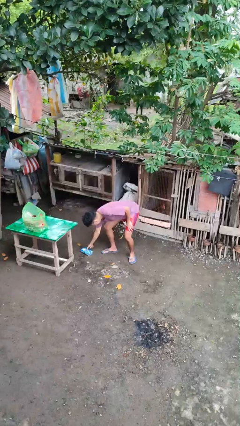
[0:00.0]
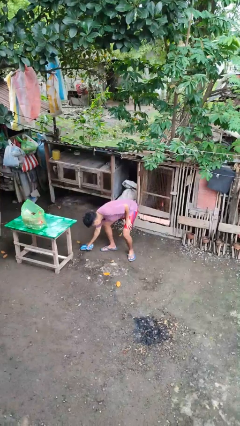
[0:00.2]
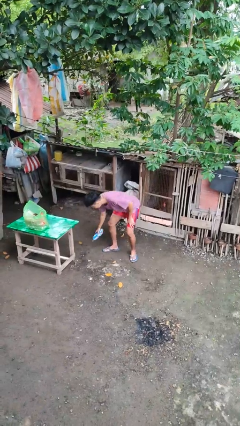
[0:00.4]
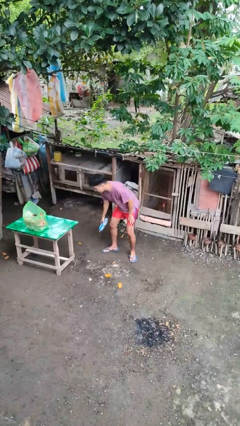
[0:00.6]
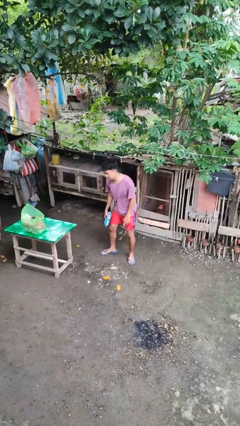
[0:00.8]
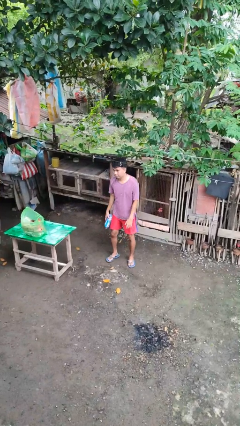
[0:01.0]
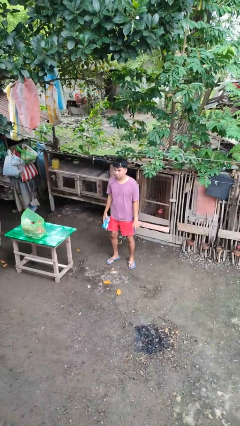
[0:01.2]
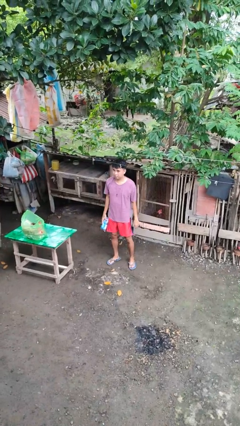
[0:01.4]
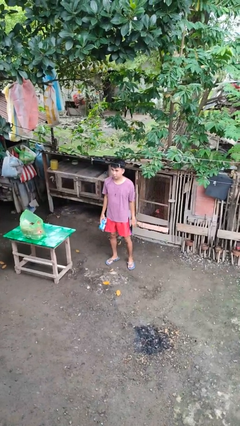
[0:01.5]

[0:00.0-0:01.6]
person picks up object from floor

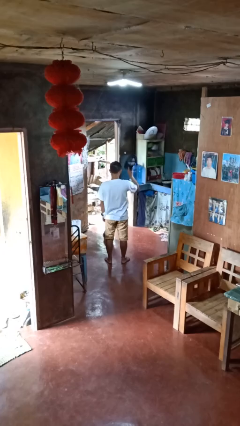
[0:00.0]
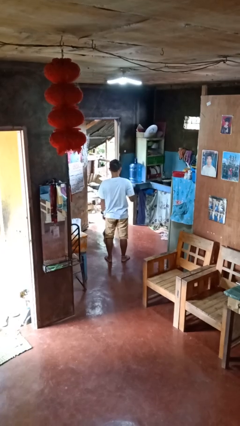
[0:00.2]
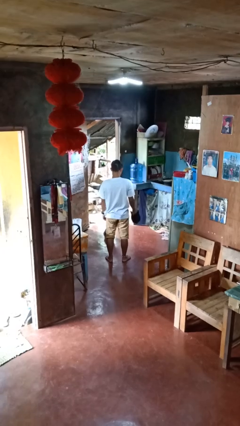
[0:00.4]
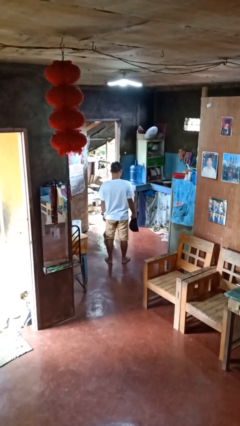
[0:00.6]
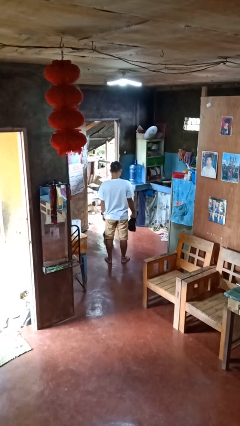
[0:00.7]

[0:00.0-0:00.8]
person takes off hat

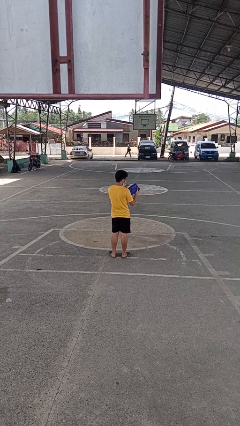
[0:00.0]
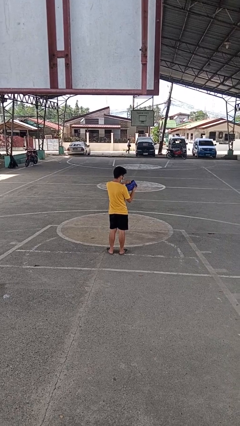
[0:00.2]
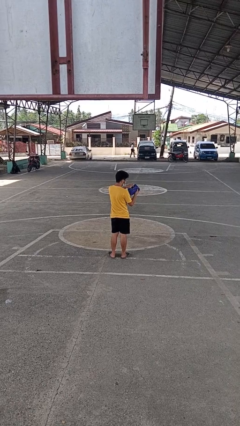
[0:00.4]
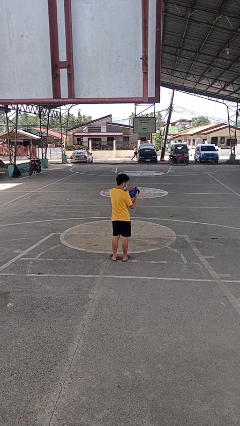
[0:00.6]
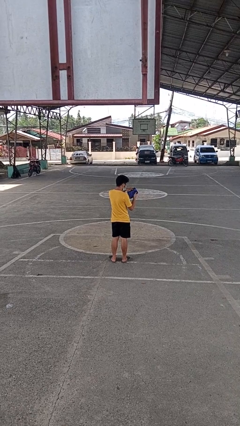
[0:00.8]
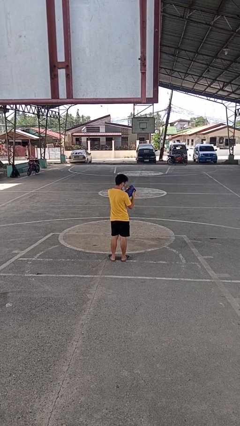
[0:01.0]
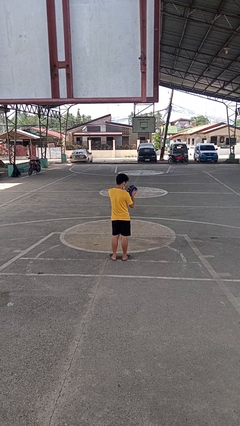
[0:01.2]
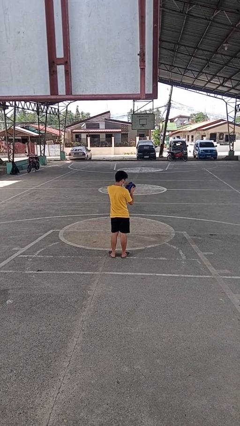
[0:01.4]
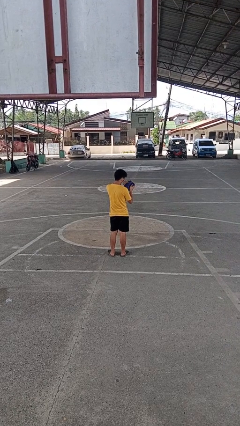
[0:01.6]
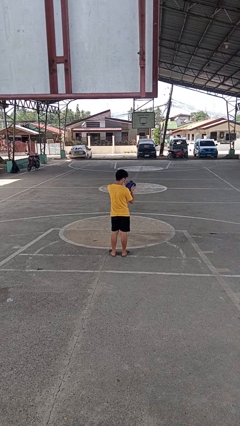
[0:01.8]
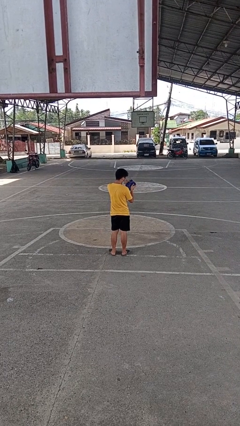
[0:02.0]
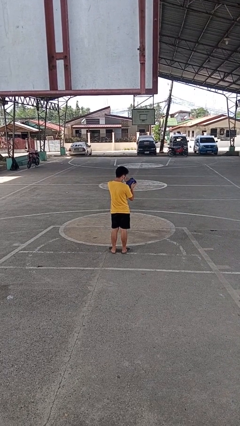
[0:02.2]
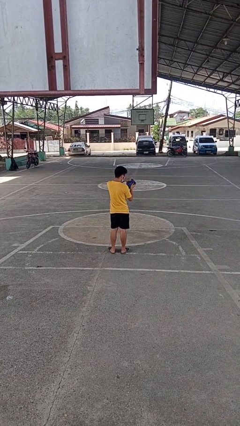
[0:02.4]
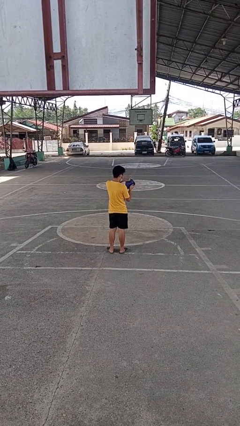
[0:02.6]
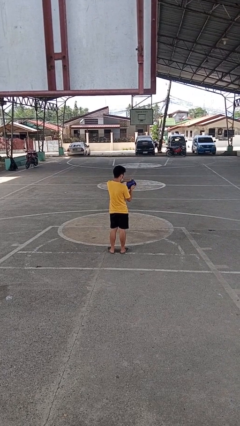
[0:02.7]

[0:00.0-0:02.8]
person searches in purse

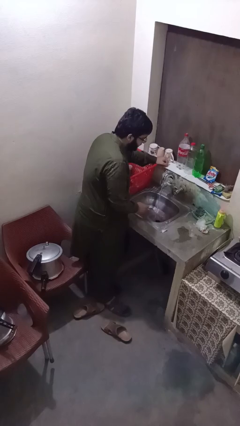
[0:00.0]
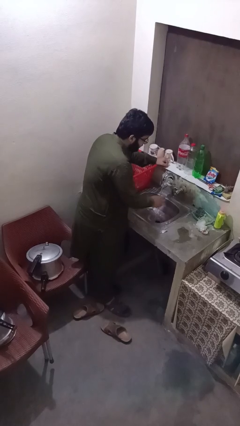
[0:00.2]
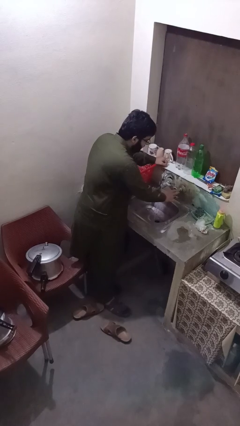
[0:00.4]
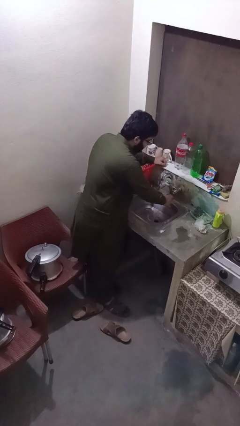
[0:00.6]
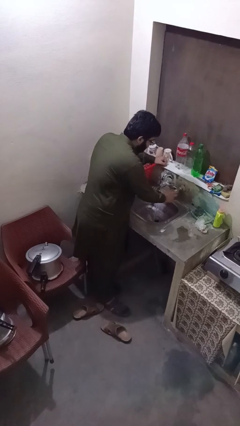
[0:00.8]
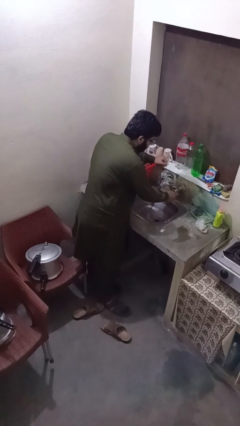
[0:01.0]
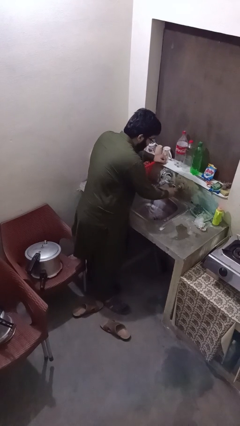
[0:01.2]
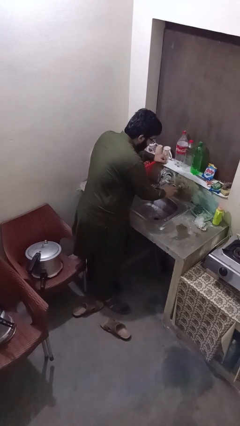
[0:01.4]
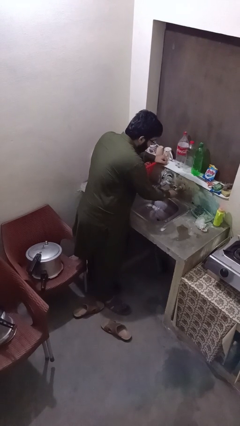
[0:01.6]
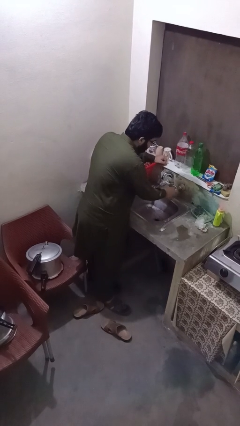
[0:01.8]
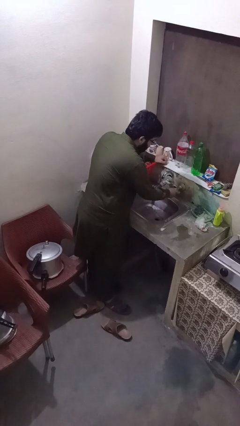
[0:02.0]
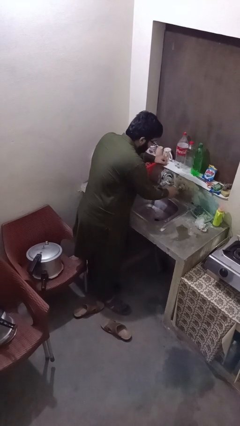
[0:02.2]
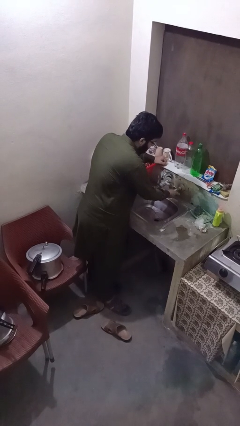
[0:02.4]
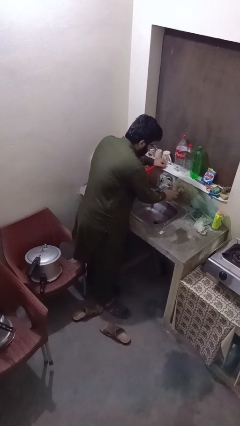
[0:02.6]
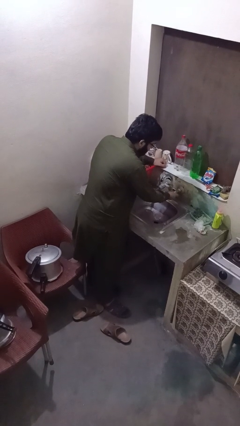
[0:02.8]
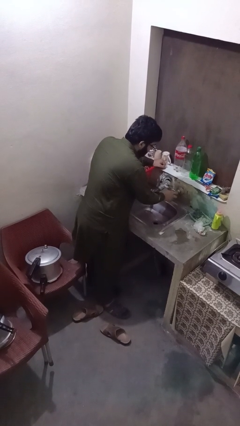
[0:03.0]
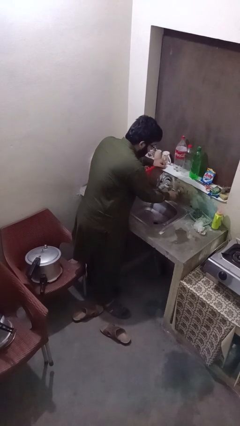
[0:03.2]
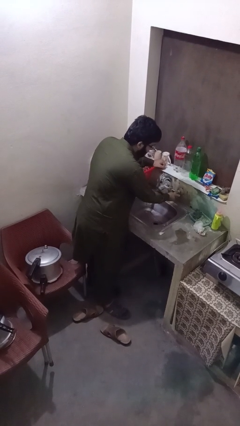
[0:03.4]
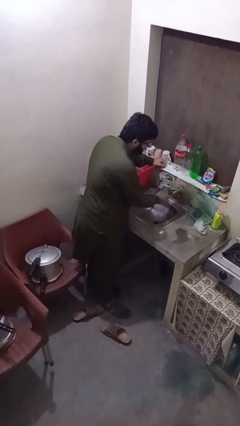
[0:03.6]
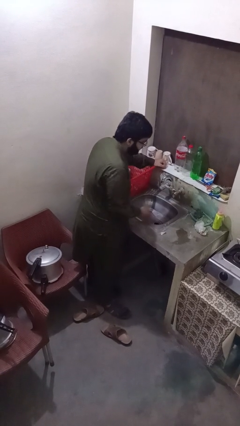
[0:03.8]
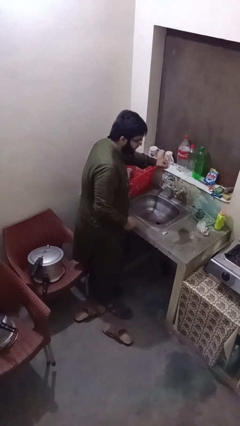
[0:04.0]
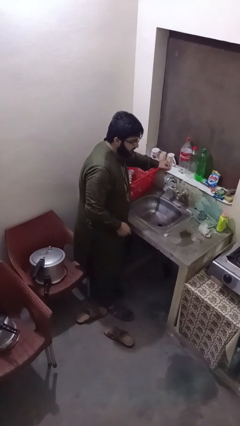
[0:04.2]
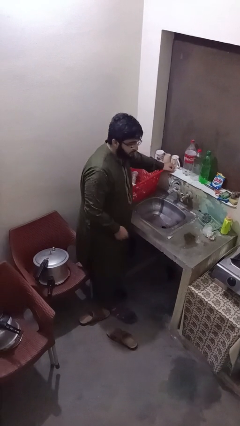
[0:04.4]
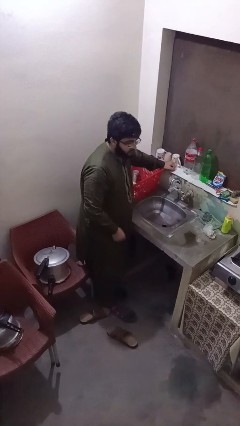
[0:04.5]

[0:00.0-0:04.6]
person turns off faucet

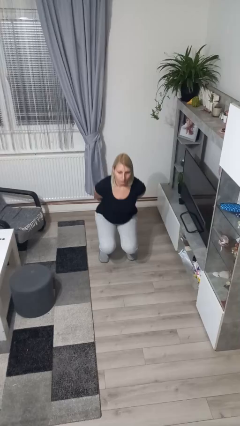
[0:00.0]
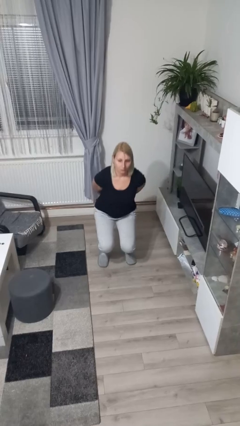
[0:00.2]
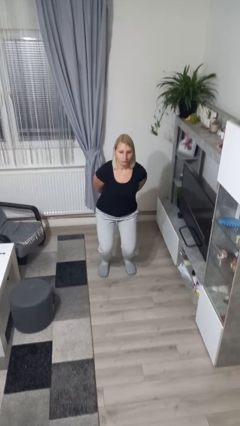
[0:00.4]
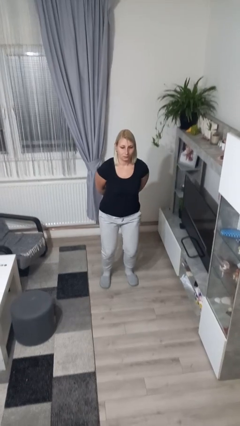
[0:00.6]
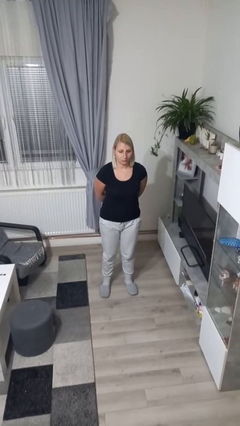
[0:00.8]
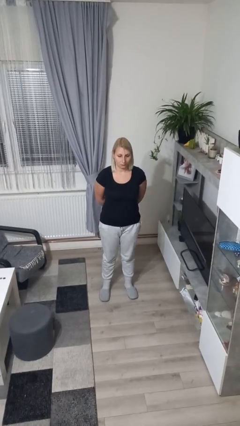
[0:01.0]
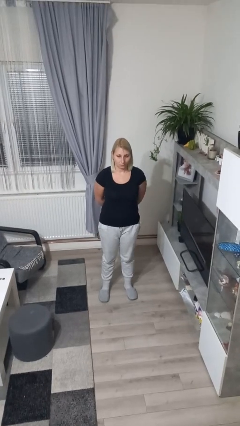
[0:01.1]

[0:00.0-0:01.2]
person stands up

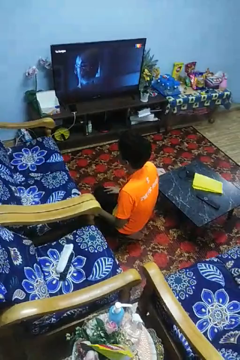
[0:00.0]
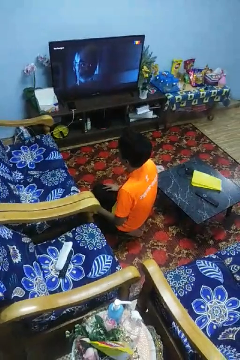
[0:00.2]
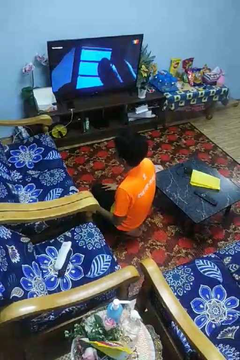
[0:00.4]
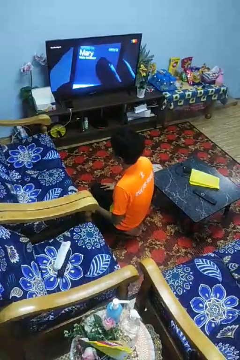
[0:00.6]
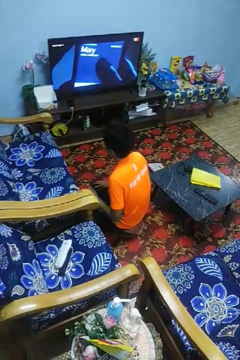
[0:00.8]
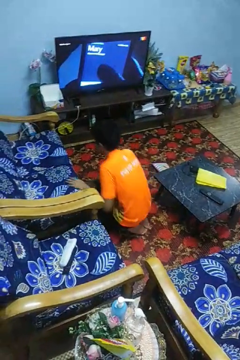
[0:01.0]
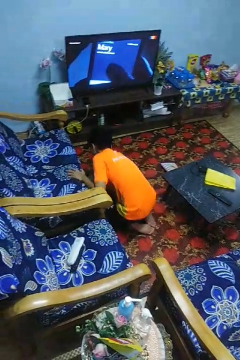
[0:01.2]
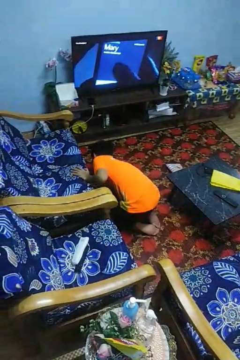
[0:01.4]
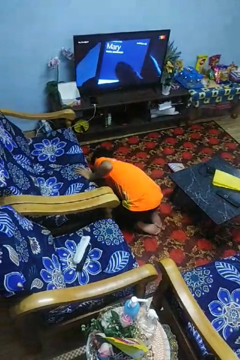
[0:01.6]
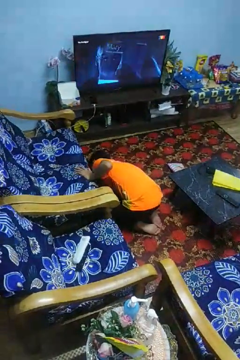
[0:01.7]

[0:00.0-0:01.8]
person searches under couch

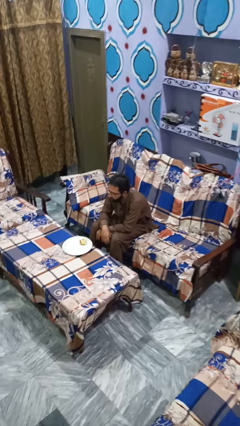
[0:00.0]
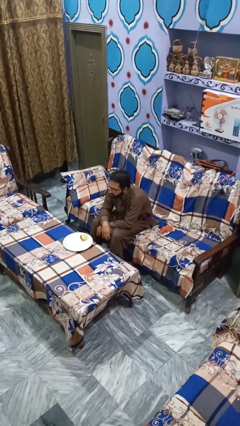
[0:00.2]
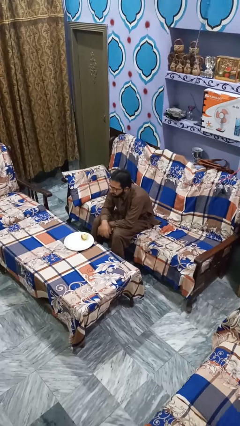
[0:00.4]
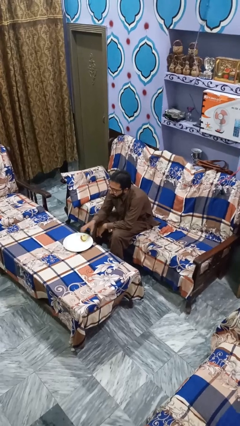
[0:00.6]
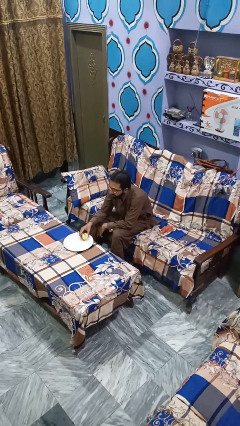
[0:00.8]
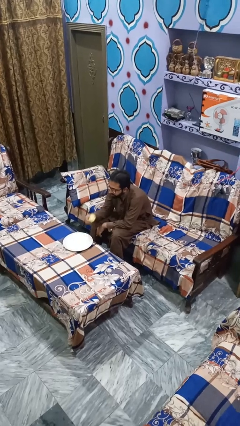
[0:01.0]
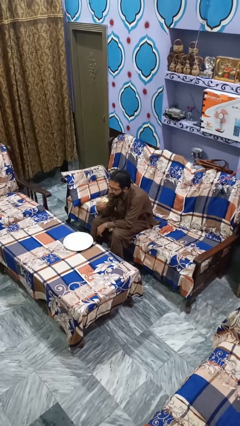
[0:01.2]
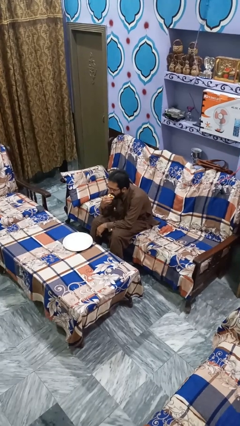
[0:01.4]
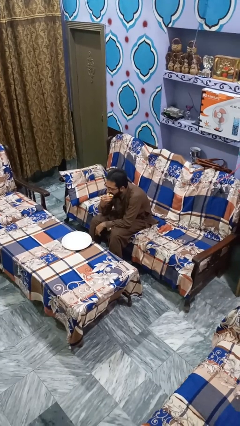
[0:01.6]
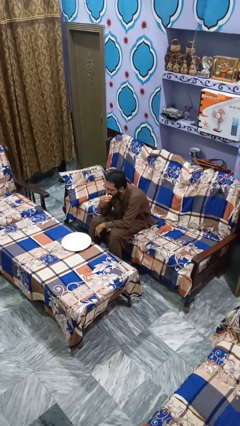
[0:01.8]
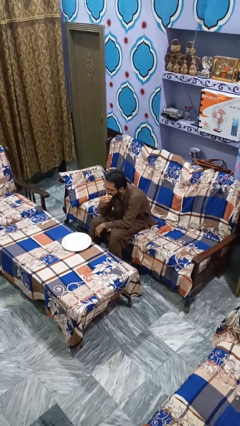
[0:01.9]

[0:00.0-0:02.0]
person eats apple

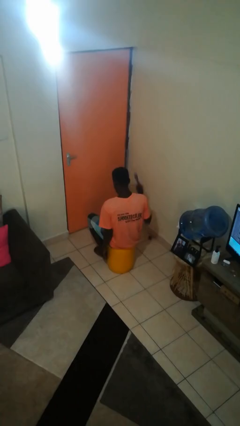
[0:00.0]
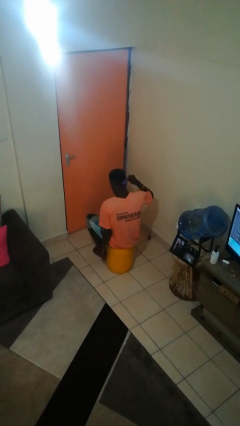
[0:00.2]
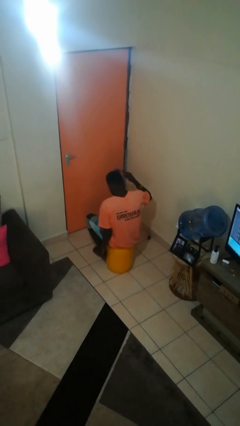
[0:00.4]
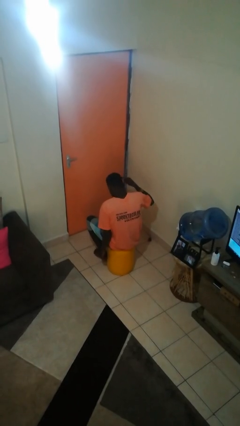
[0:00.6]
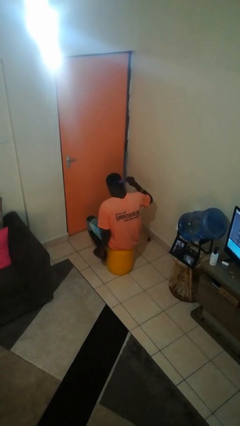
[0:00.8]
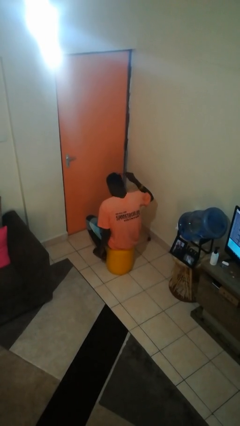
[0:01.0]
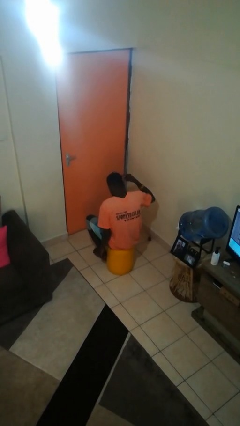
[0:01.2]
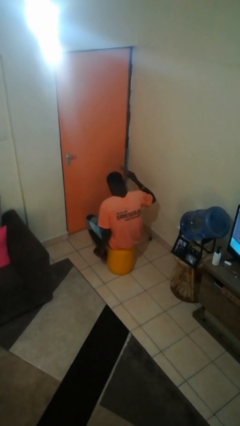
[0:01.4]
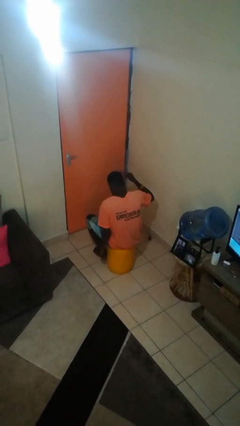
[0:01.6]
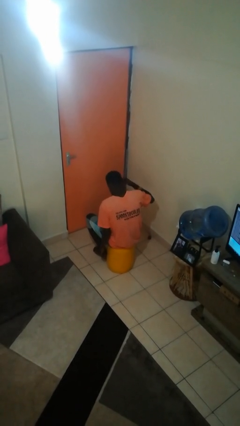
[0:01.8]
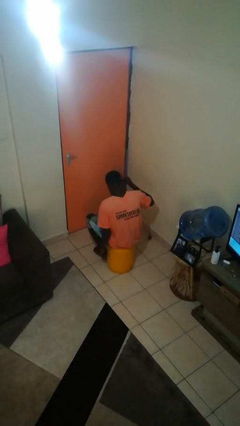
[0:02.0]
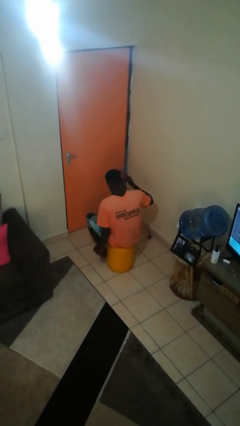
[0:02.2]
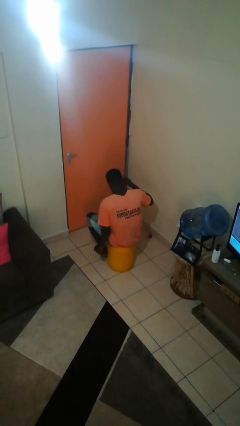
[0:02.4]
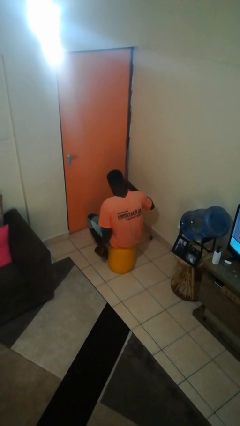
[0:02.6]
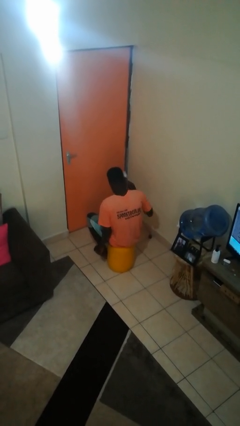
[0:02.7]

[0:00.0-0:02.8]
person brushes hair
